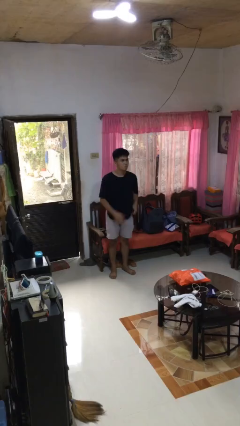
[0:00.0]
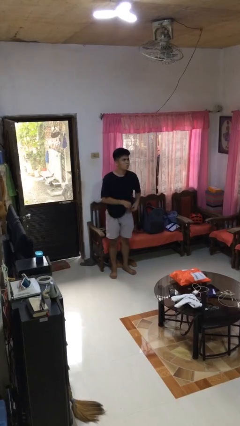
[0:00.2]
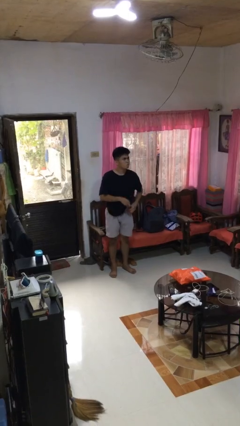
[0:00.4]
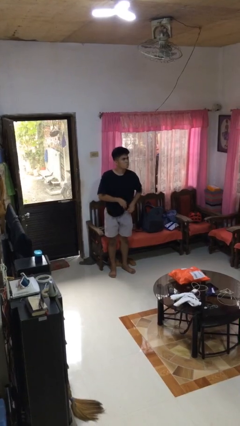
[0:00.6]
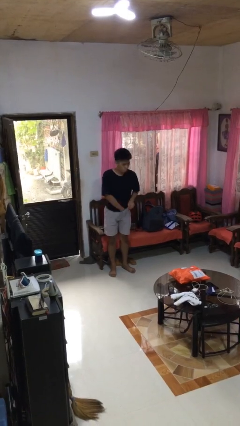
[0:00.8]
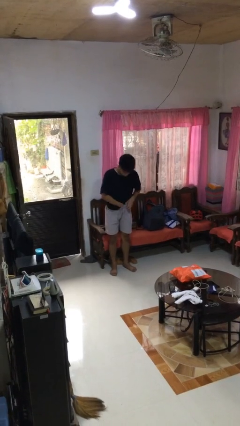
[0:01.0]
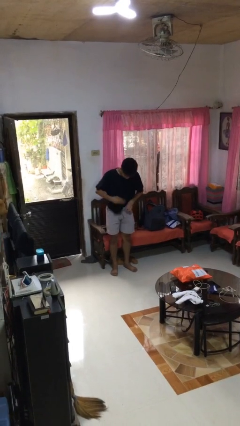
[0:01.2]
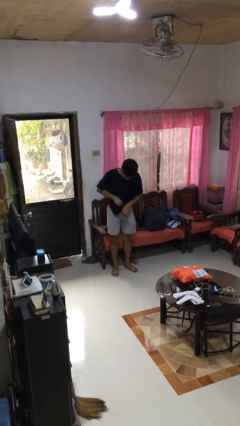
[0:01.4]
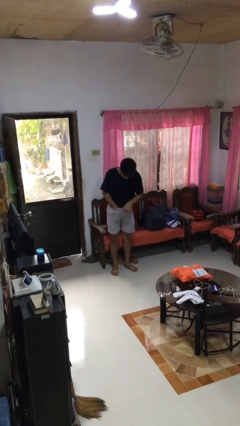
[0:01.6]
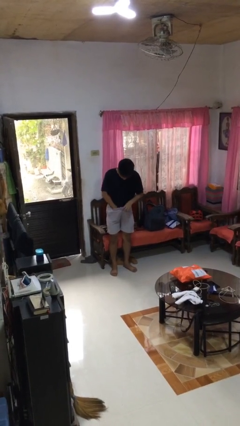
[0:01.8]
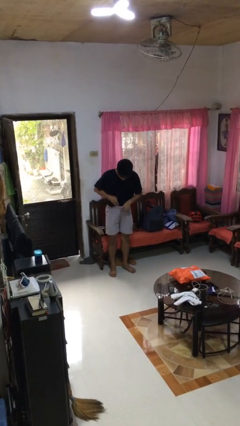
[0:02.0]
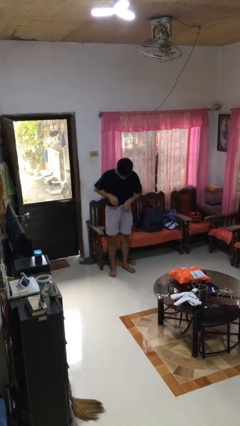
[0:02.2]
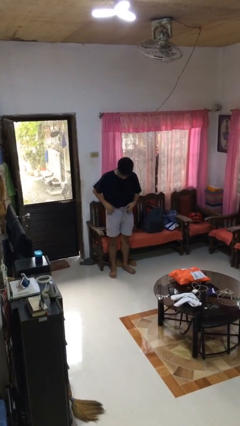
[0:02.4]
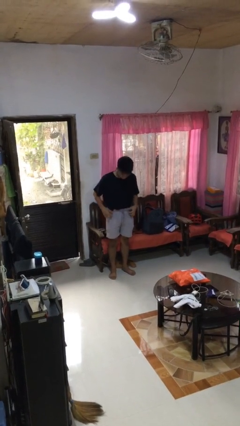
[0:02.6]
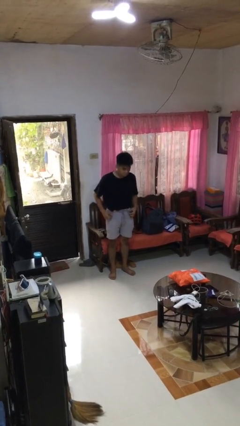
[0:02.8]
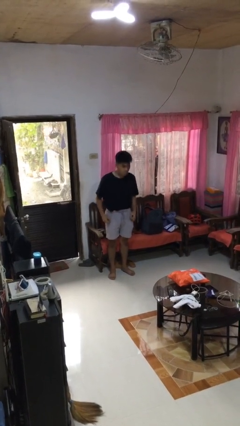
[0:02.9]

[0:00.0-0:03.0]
person tucks in shirt

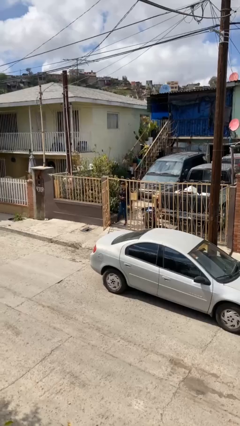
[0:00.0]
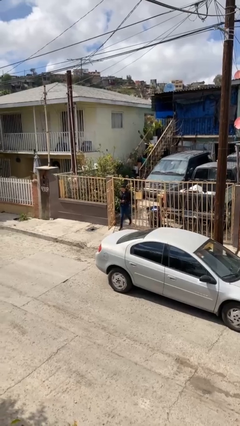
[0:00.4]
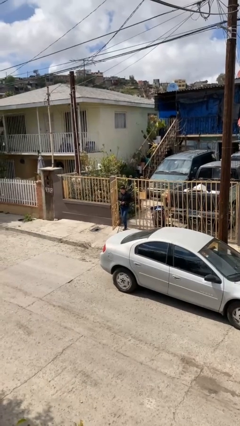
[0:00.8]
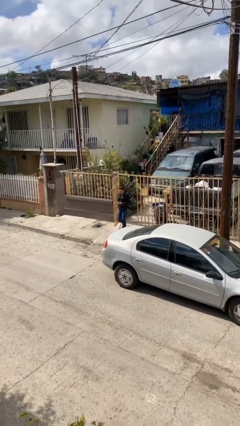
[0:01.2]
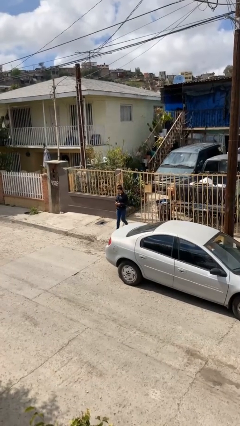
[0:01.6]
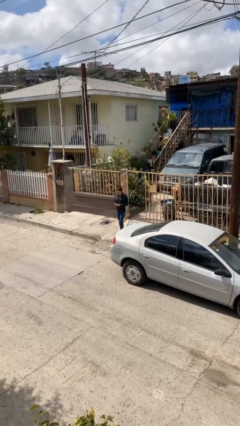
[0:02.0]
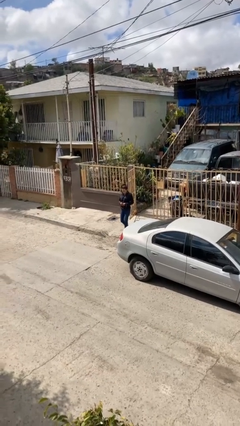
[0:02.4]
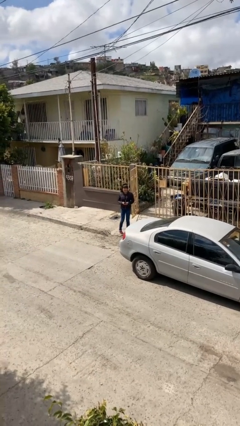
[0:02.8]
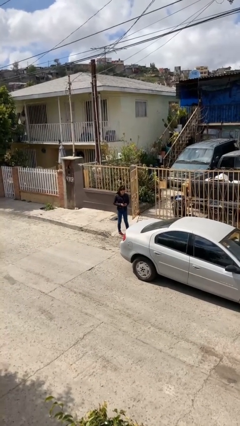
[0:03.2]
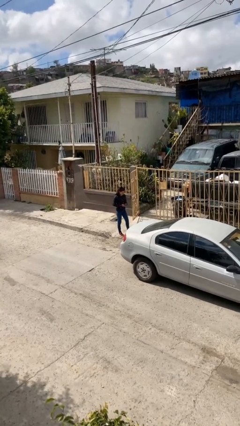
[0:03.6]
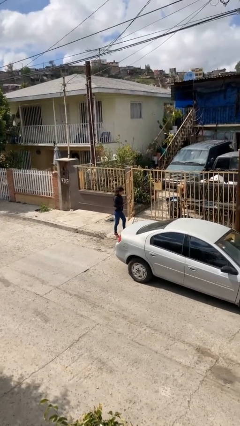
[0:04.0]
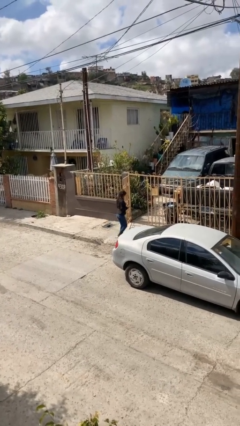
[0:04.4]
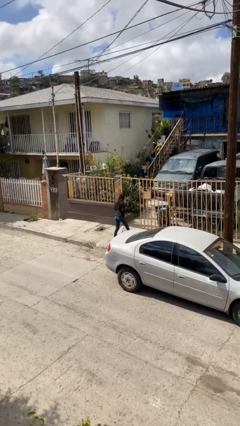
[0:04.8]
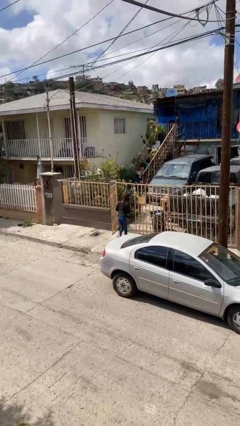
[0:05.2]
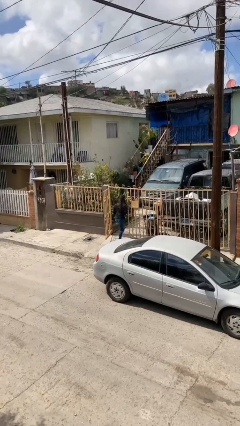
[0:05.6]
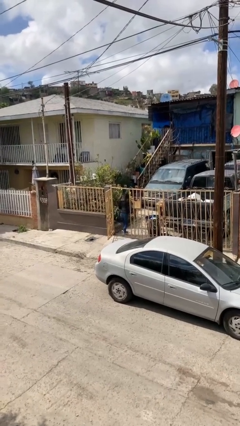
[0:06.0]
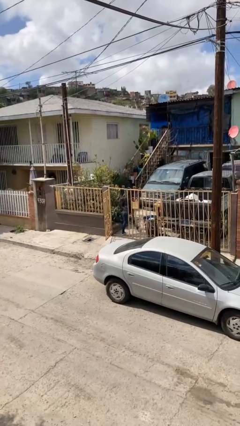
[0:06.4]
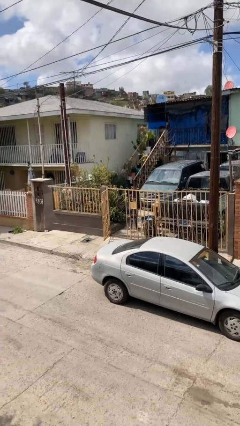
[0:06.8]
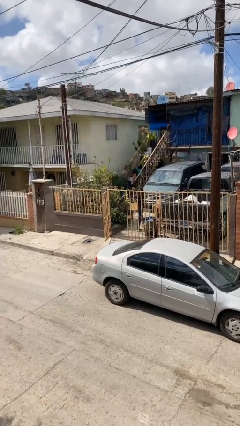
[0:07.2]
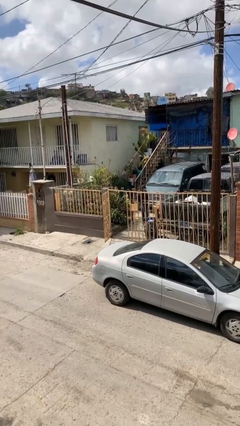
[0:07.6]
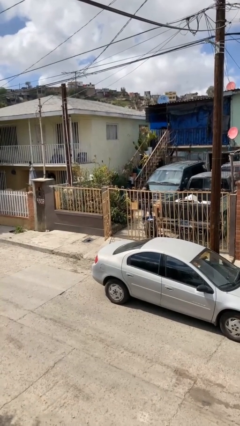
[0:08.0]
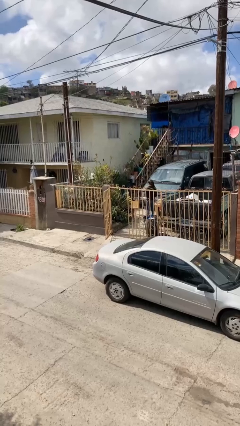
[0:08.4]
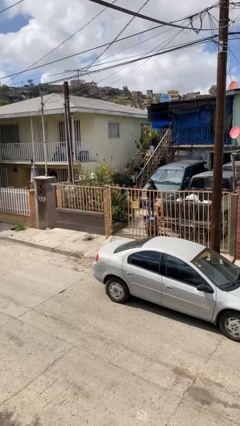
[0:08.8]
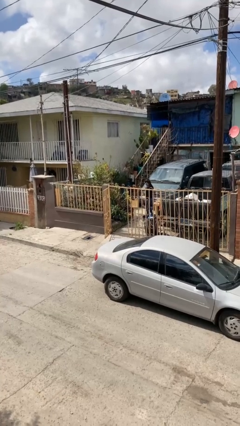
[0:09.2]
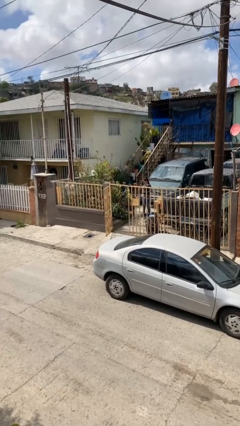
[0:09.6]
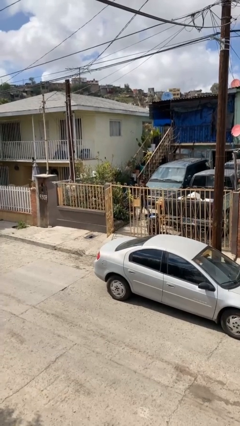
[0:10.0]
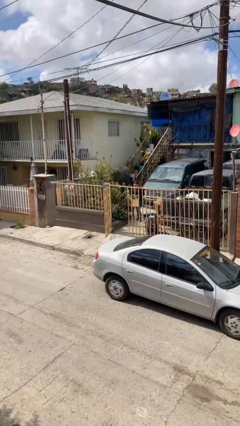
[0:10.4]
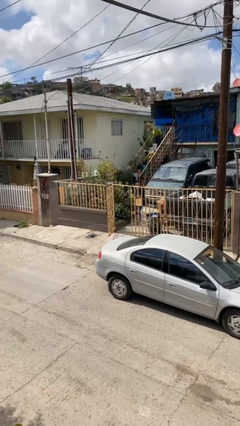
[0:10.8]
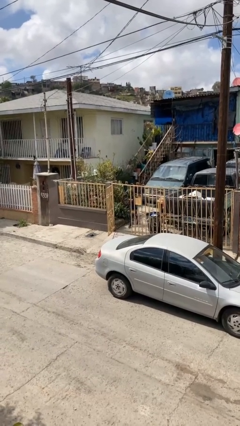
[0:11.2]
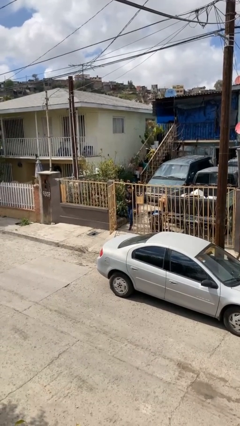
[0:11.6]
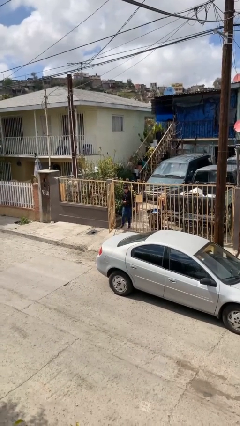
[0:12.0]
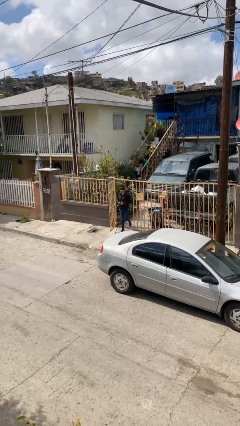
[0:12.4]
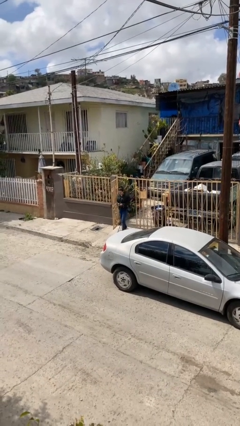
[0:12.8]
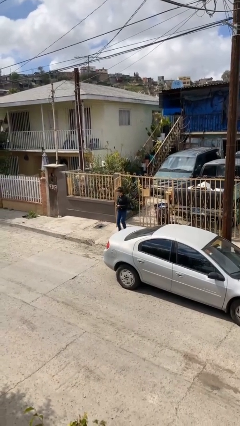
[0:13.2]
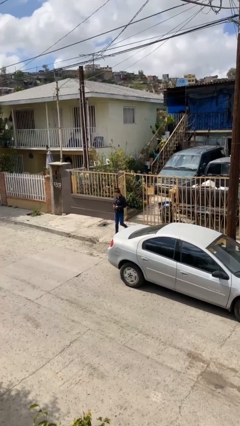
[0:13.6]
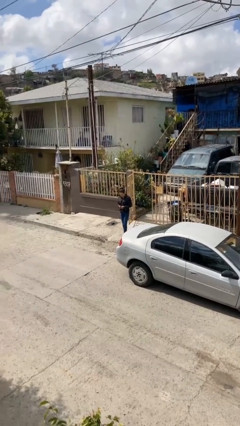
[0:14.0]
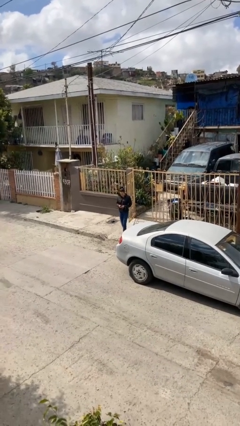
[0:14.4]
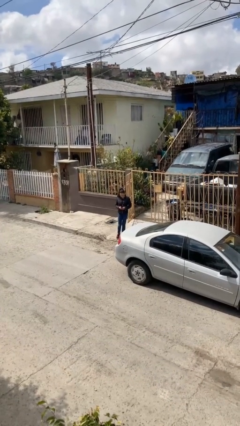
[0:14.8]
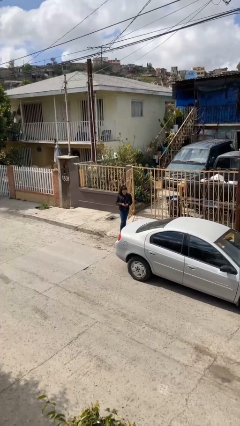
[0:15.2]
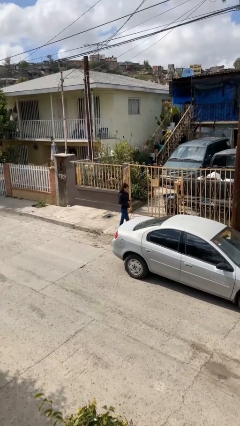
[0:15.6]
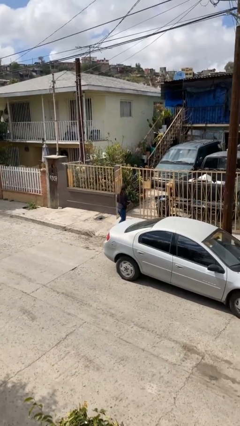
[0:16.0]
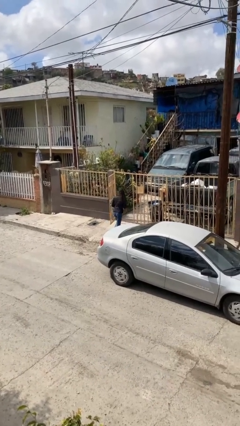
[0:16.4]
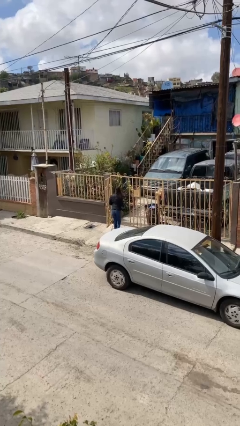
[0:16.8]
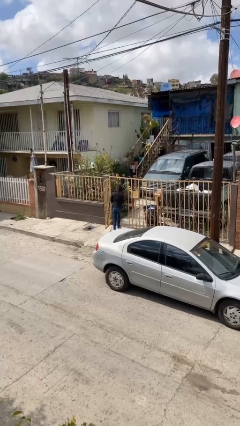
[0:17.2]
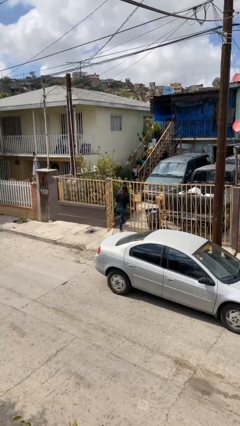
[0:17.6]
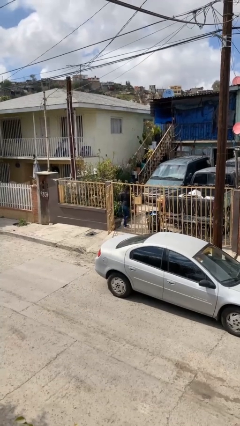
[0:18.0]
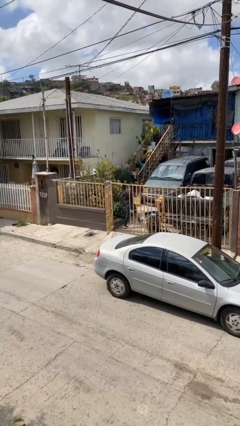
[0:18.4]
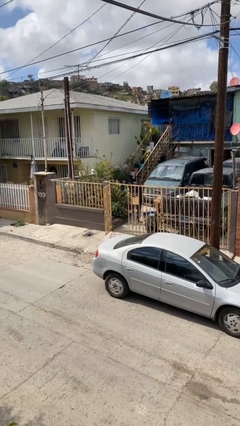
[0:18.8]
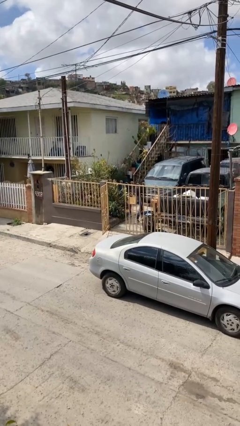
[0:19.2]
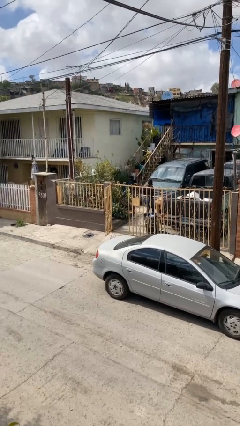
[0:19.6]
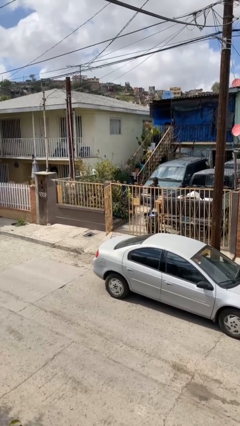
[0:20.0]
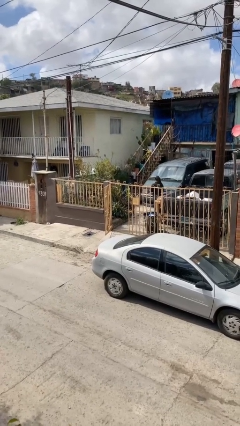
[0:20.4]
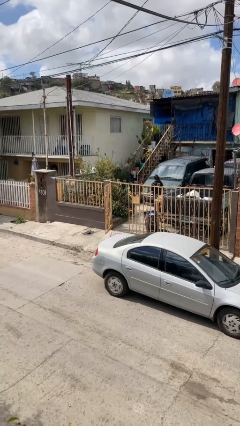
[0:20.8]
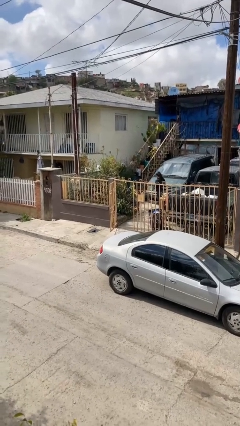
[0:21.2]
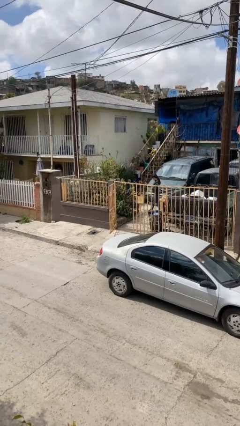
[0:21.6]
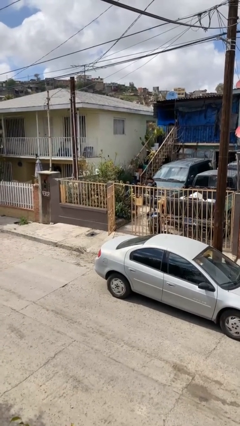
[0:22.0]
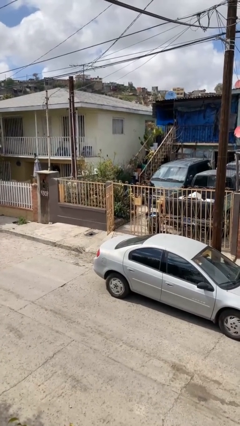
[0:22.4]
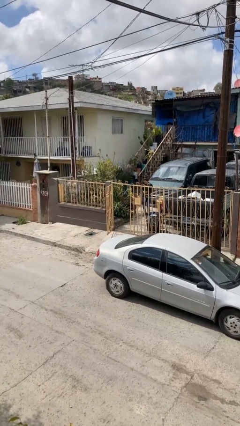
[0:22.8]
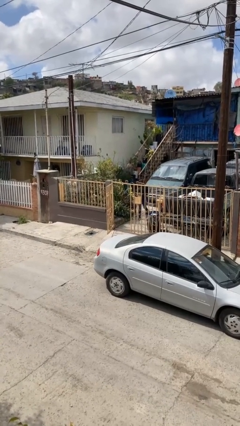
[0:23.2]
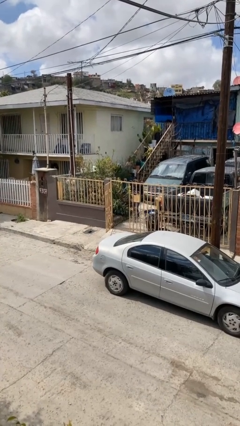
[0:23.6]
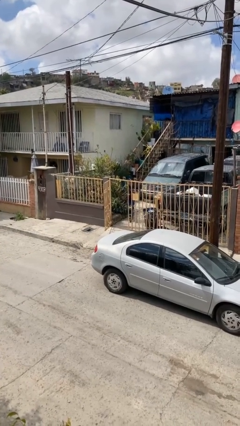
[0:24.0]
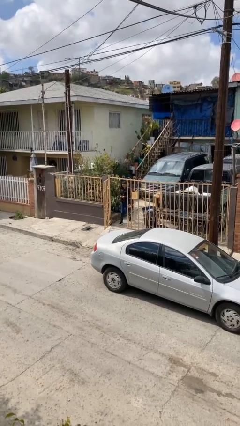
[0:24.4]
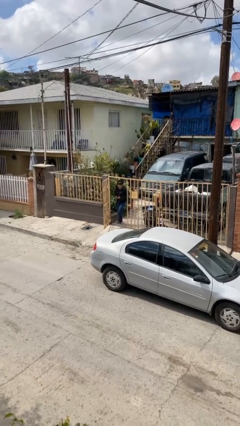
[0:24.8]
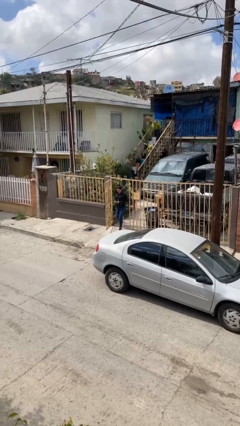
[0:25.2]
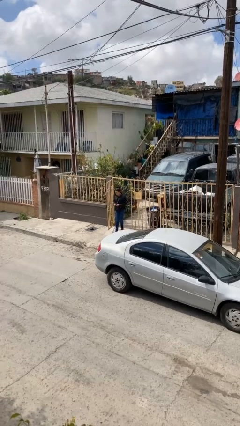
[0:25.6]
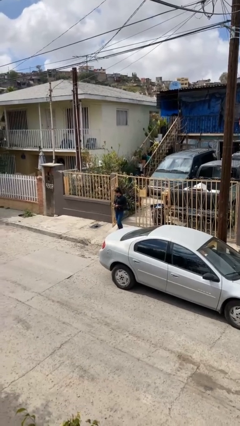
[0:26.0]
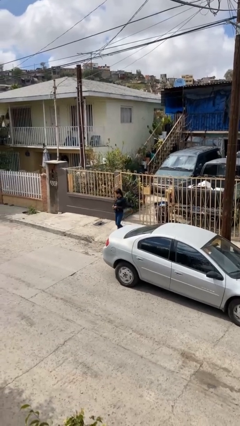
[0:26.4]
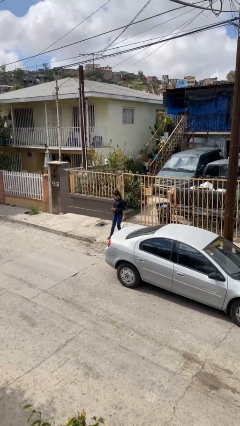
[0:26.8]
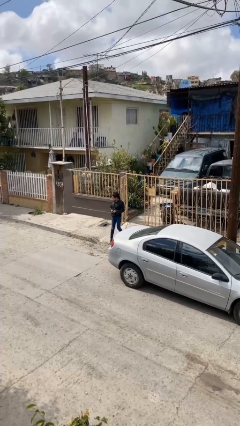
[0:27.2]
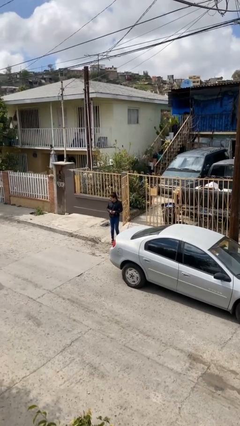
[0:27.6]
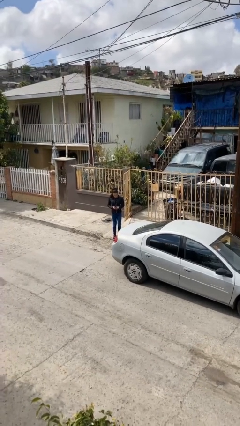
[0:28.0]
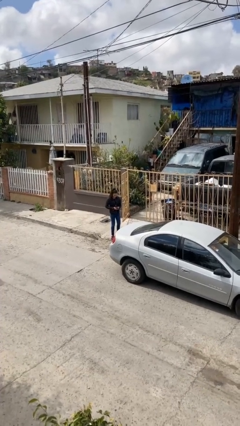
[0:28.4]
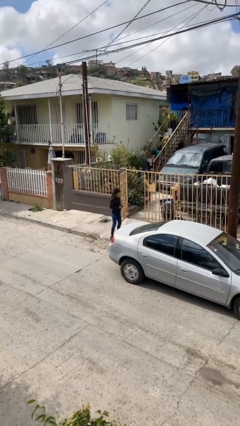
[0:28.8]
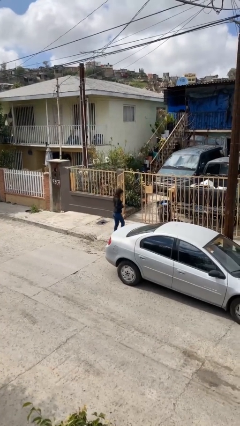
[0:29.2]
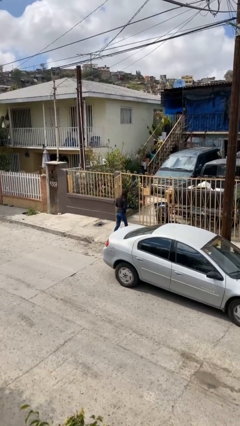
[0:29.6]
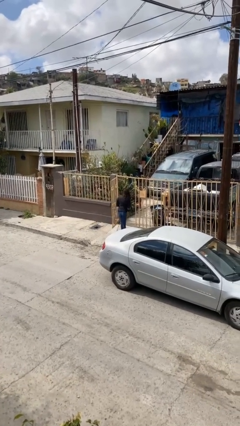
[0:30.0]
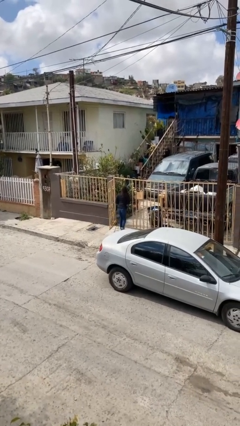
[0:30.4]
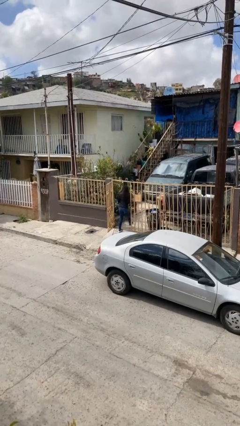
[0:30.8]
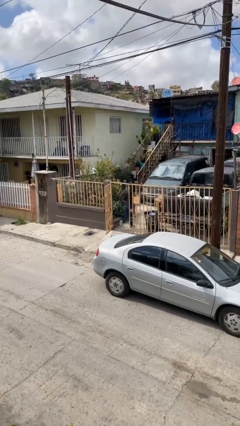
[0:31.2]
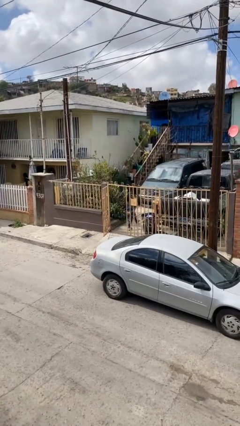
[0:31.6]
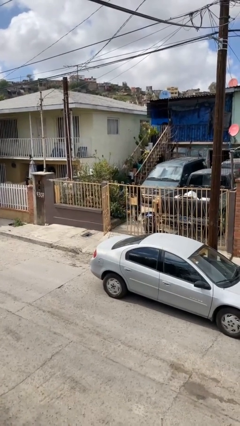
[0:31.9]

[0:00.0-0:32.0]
person texts on phone
